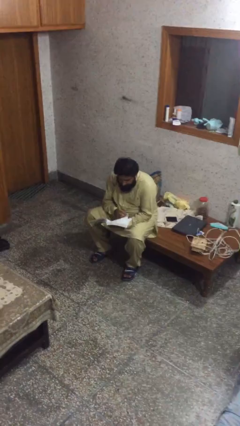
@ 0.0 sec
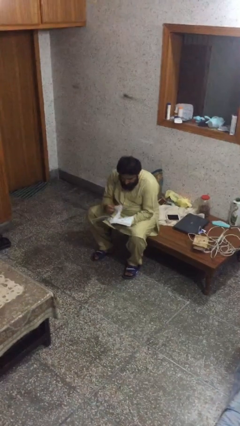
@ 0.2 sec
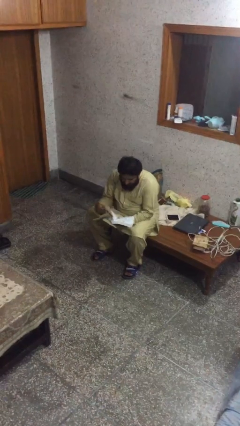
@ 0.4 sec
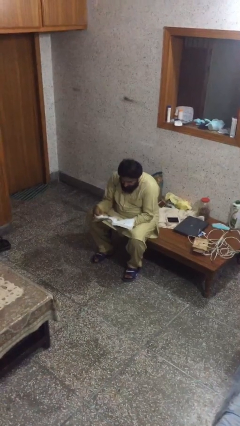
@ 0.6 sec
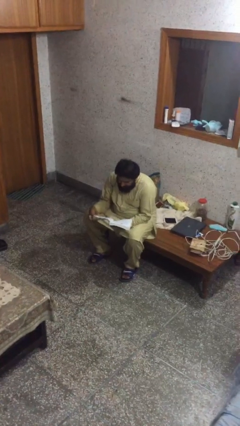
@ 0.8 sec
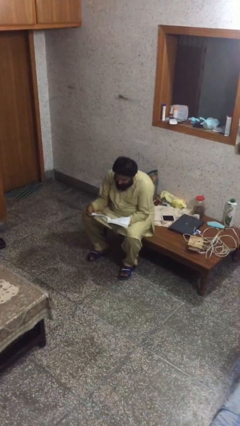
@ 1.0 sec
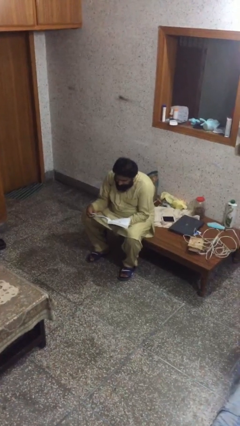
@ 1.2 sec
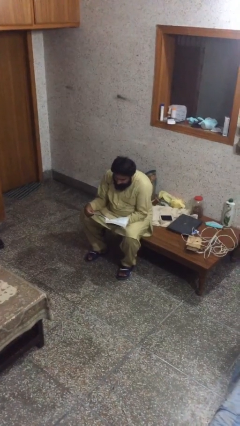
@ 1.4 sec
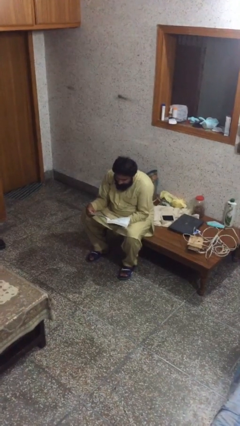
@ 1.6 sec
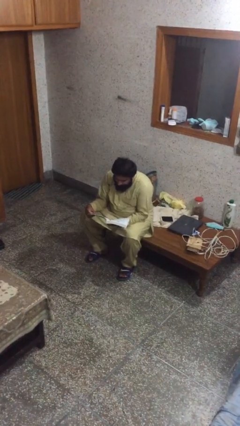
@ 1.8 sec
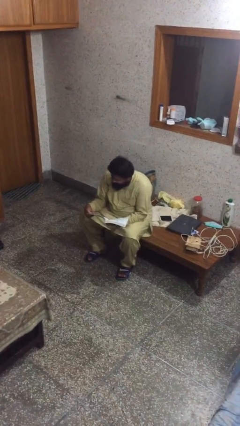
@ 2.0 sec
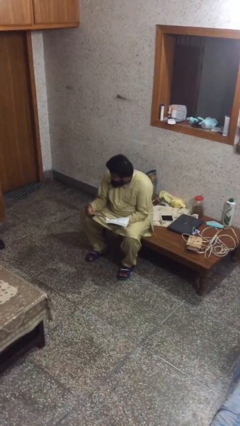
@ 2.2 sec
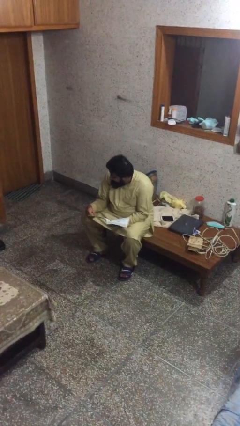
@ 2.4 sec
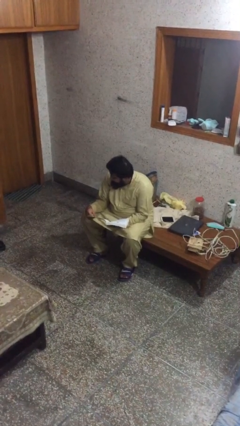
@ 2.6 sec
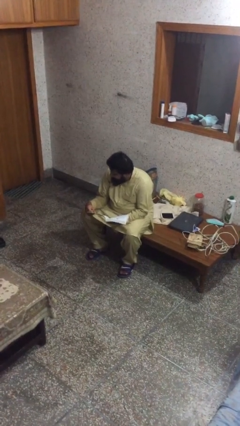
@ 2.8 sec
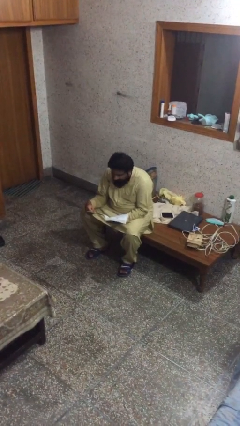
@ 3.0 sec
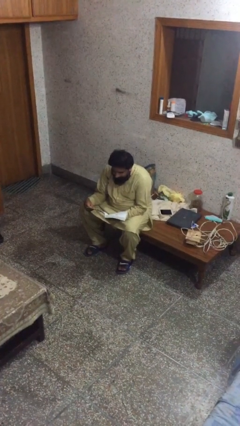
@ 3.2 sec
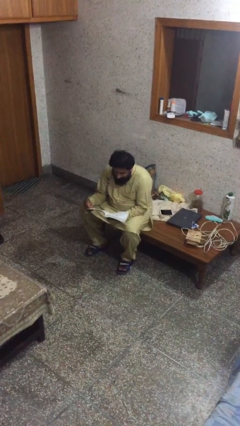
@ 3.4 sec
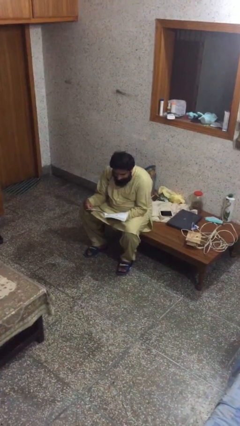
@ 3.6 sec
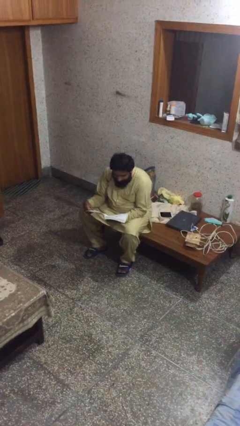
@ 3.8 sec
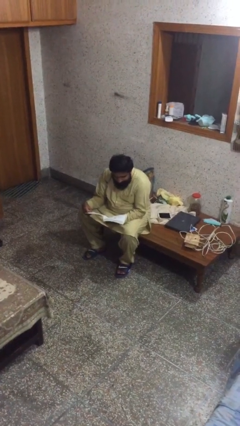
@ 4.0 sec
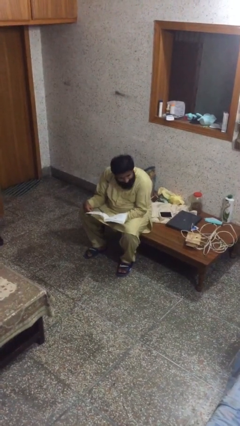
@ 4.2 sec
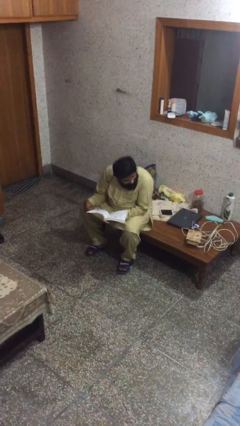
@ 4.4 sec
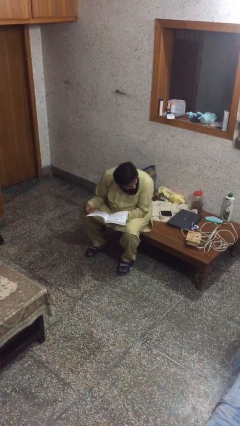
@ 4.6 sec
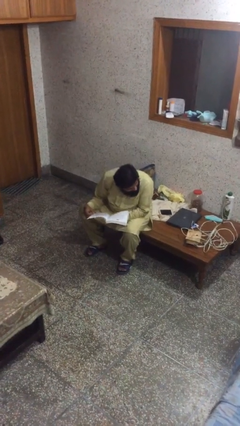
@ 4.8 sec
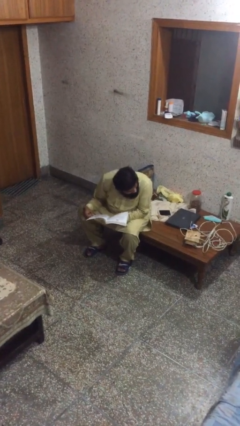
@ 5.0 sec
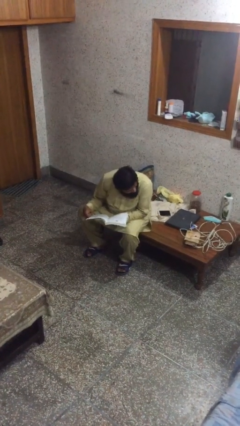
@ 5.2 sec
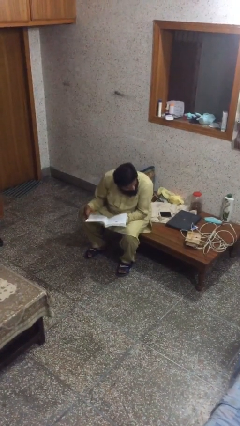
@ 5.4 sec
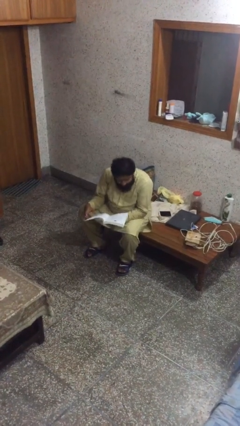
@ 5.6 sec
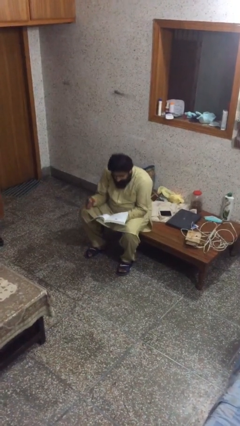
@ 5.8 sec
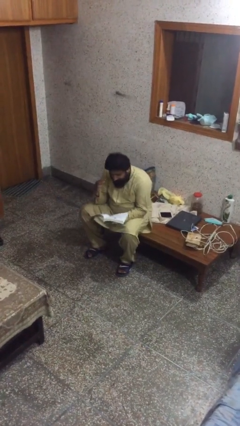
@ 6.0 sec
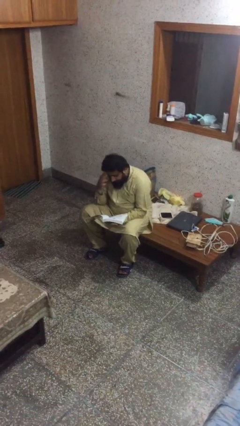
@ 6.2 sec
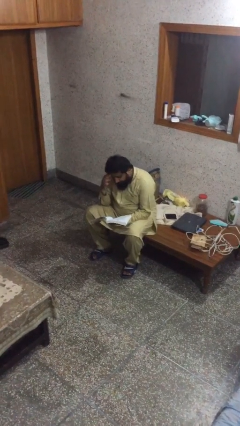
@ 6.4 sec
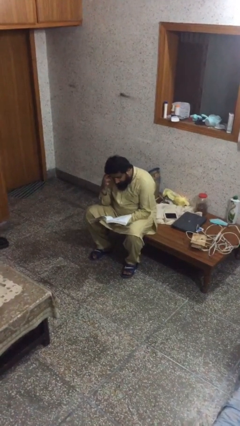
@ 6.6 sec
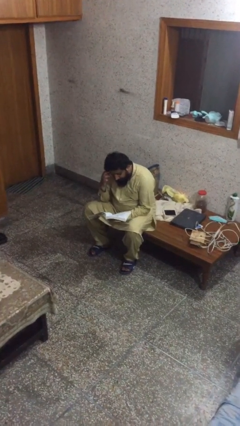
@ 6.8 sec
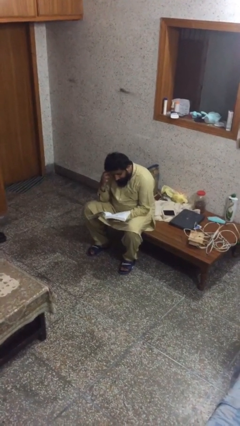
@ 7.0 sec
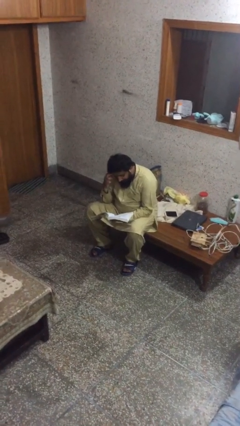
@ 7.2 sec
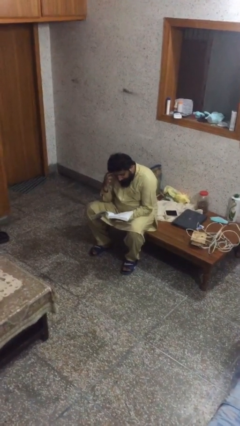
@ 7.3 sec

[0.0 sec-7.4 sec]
person reads document

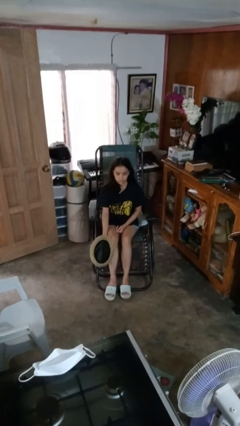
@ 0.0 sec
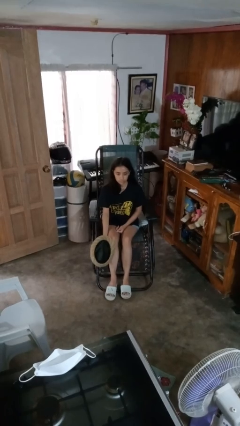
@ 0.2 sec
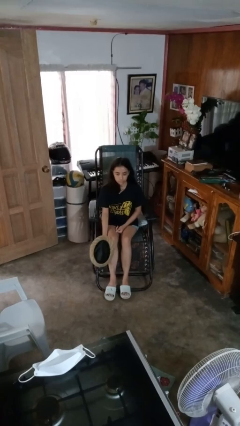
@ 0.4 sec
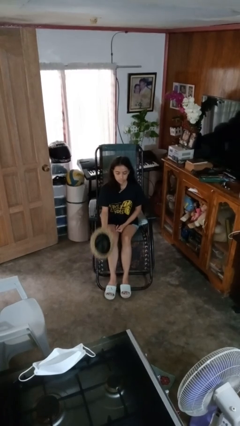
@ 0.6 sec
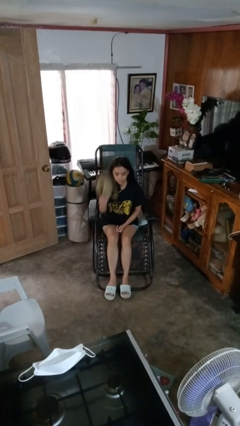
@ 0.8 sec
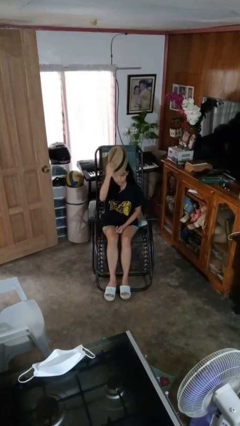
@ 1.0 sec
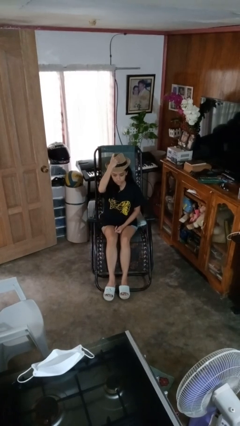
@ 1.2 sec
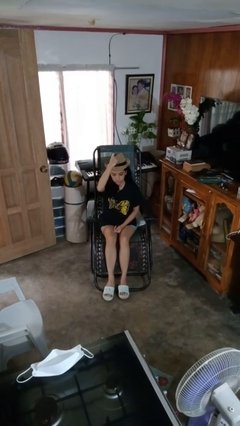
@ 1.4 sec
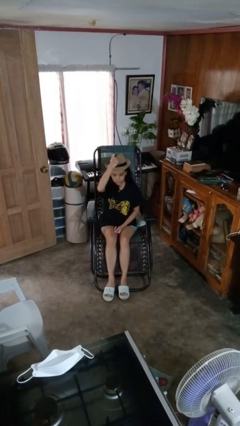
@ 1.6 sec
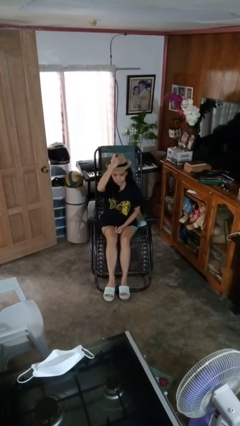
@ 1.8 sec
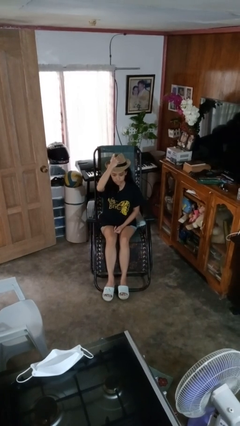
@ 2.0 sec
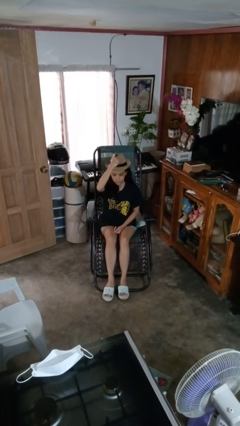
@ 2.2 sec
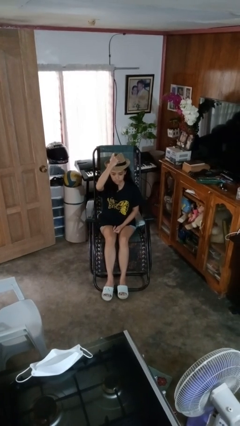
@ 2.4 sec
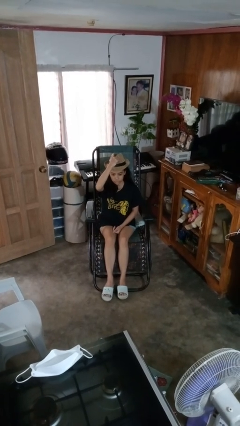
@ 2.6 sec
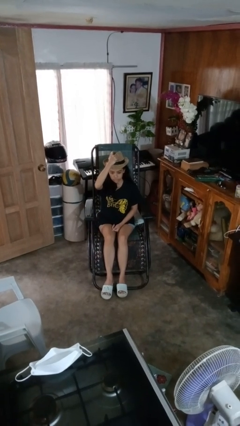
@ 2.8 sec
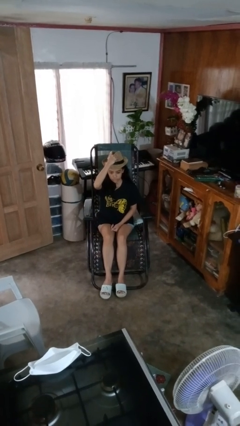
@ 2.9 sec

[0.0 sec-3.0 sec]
person puts on hat

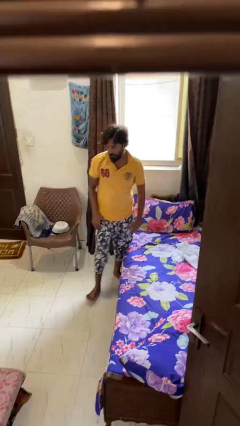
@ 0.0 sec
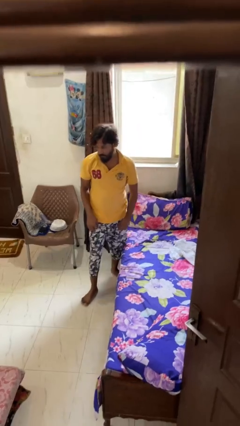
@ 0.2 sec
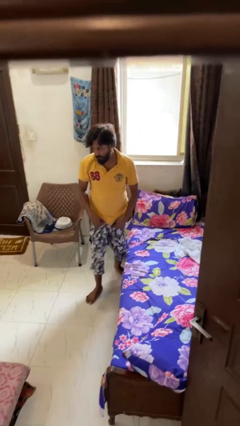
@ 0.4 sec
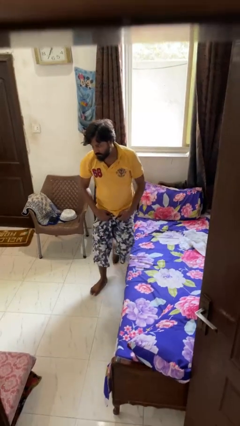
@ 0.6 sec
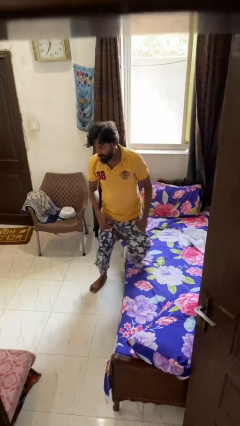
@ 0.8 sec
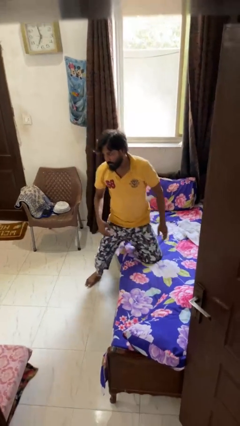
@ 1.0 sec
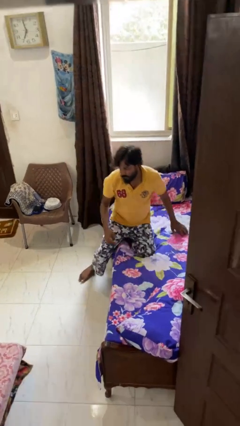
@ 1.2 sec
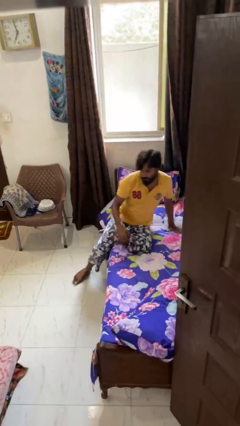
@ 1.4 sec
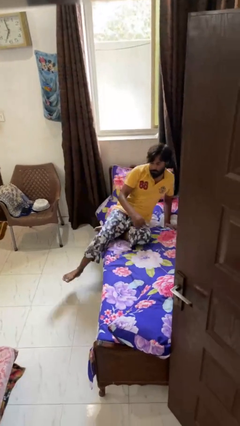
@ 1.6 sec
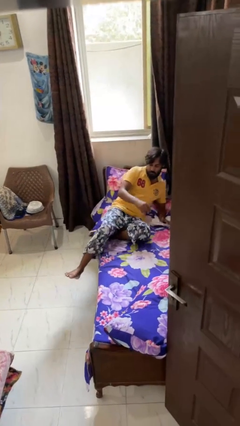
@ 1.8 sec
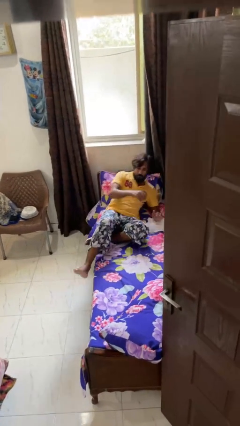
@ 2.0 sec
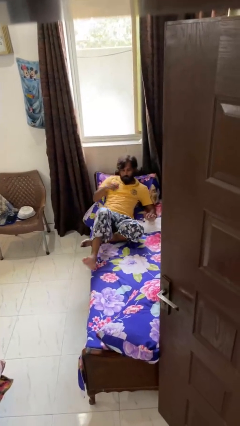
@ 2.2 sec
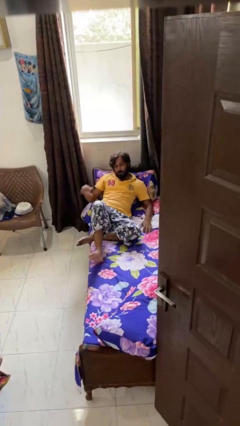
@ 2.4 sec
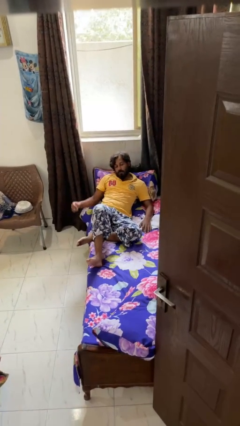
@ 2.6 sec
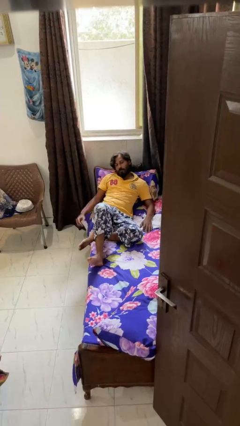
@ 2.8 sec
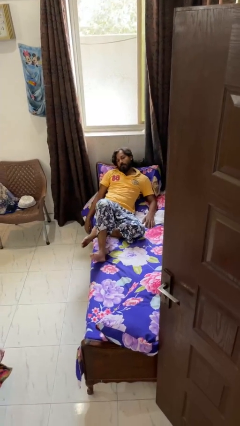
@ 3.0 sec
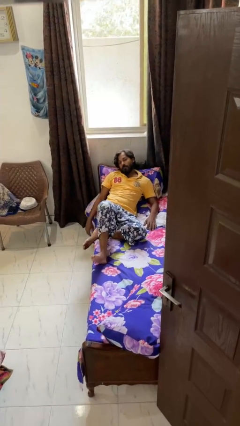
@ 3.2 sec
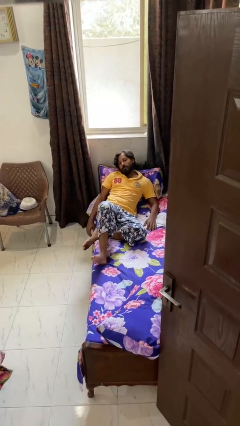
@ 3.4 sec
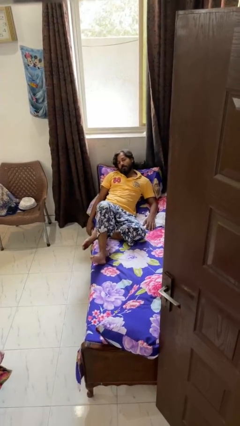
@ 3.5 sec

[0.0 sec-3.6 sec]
person lies down on bed

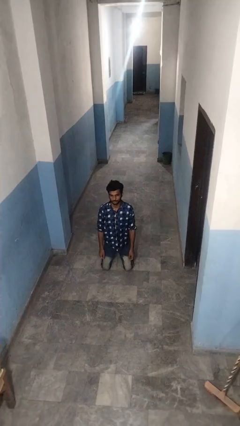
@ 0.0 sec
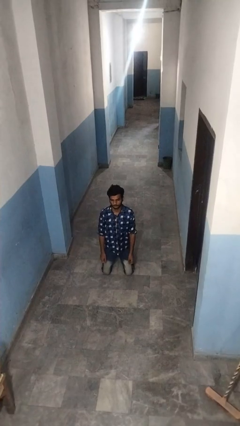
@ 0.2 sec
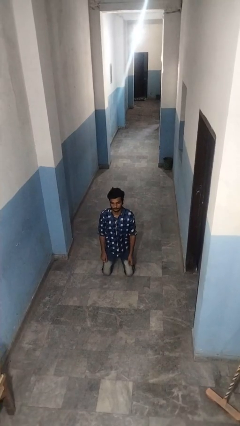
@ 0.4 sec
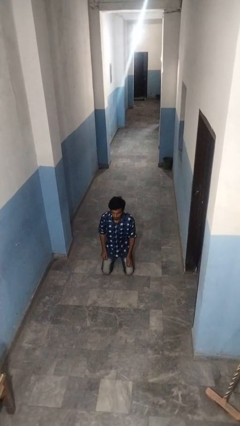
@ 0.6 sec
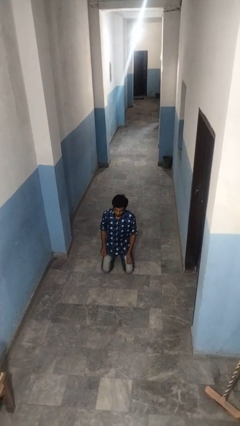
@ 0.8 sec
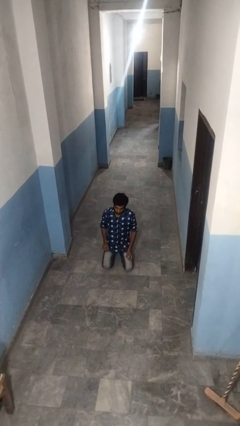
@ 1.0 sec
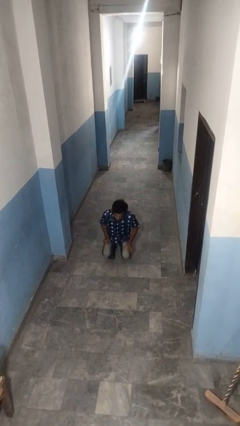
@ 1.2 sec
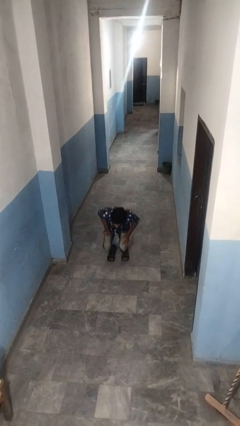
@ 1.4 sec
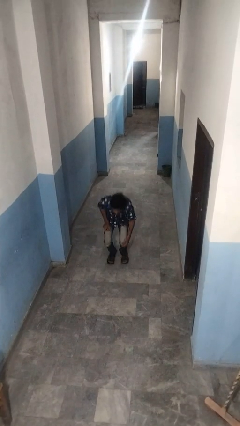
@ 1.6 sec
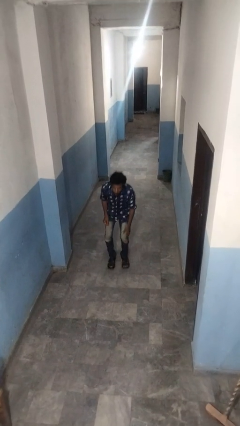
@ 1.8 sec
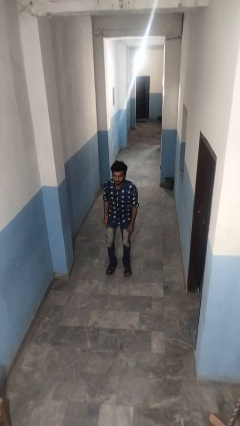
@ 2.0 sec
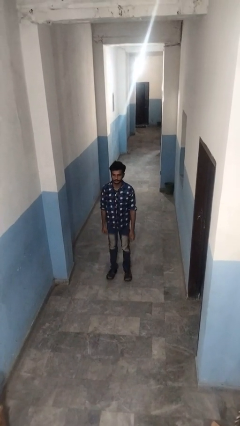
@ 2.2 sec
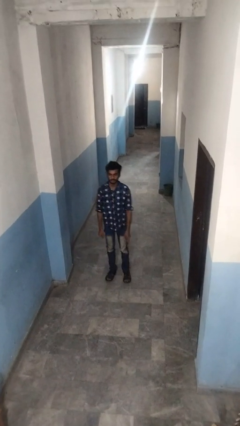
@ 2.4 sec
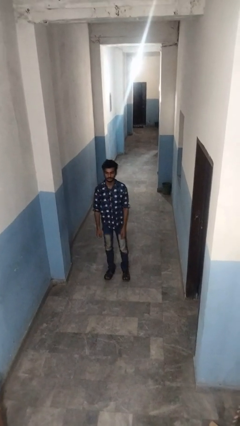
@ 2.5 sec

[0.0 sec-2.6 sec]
person stands up from floor

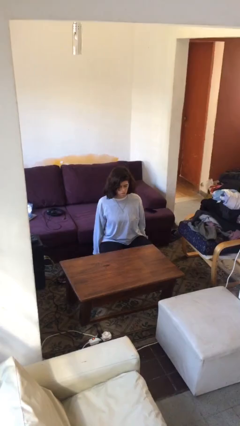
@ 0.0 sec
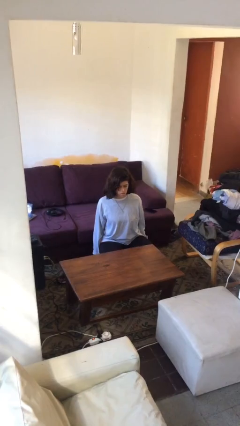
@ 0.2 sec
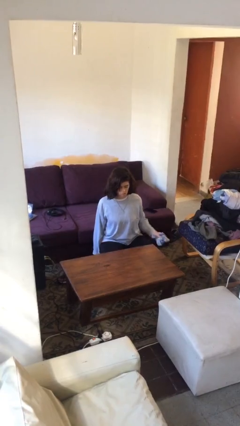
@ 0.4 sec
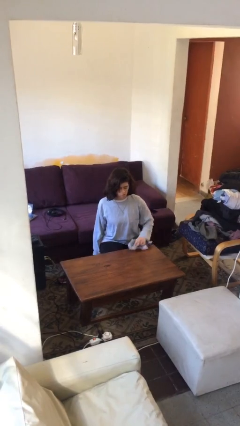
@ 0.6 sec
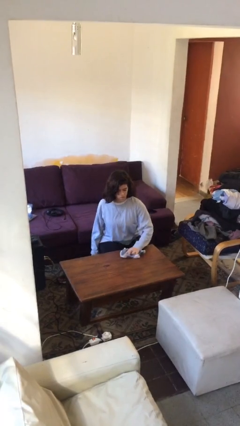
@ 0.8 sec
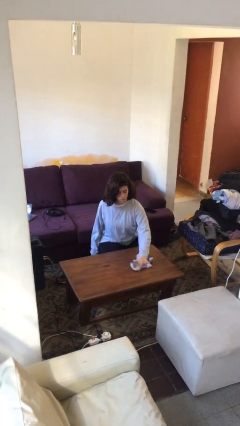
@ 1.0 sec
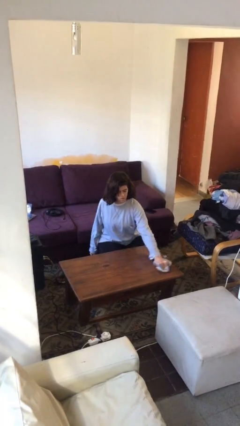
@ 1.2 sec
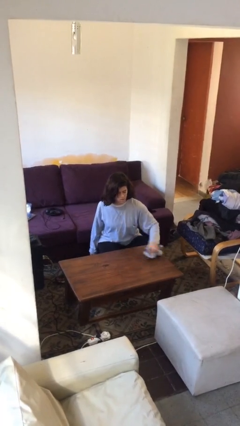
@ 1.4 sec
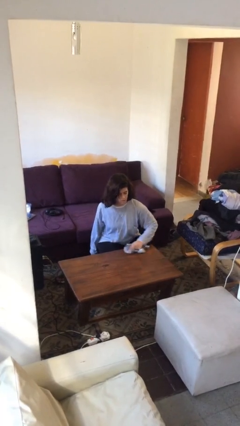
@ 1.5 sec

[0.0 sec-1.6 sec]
person cleans table with rag
